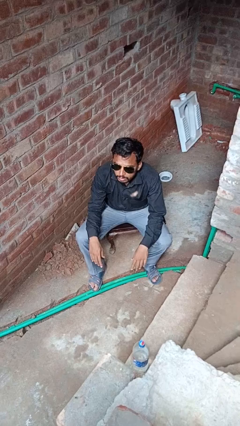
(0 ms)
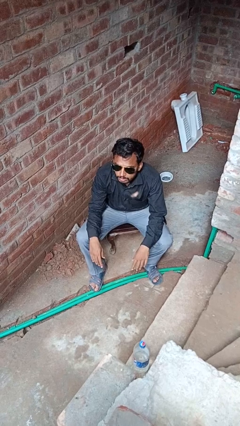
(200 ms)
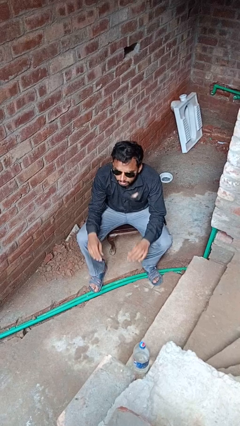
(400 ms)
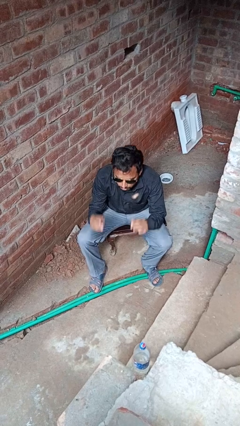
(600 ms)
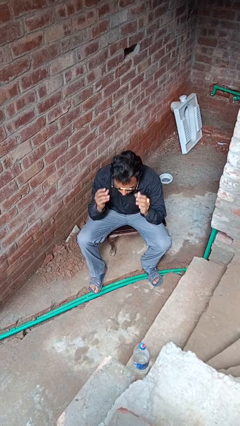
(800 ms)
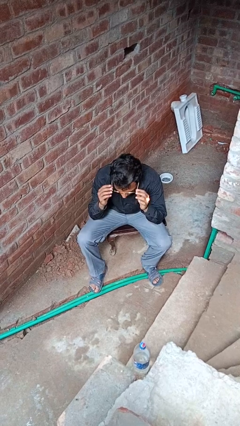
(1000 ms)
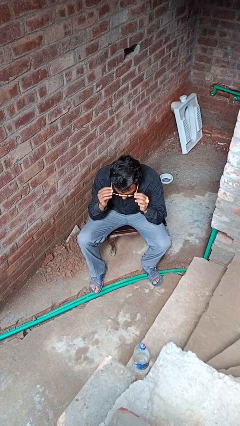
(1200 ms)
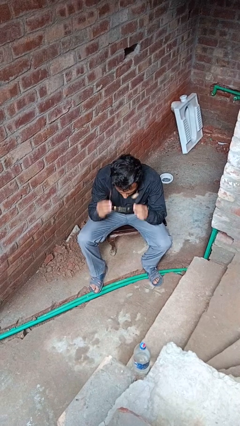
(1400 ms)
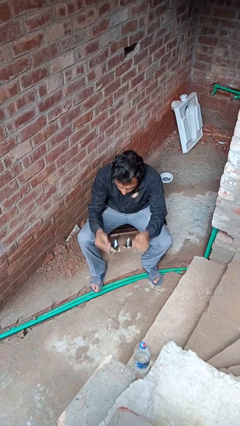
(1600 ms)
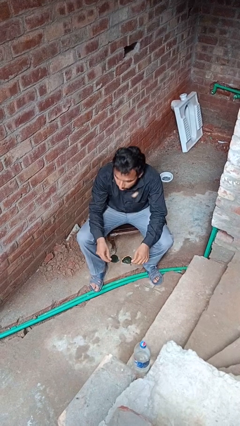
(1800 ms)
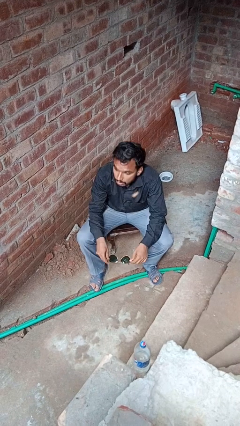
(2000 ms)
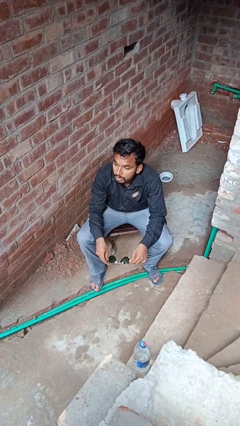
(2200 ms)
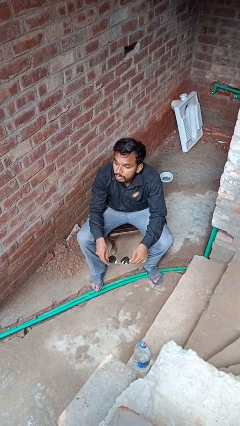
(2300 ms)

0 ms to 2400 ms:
person takes off glasses

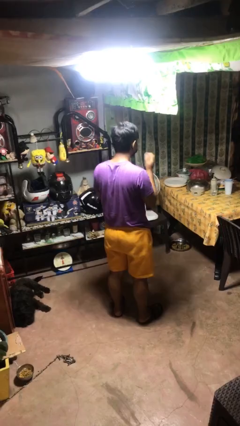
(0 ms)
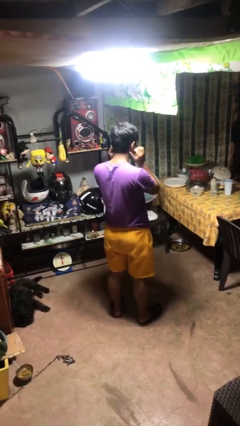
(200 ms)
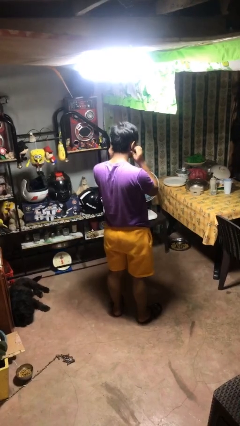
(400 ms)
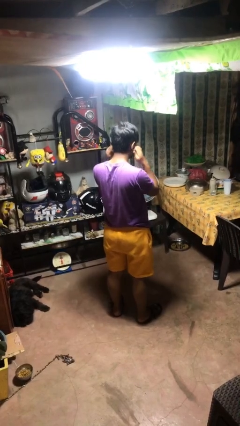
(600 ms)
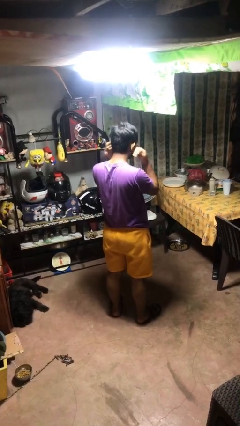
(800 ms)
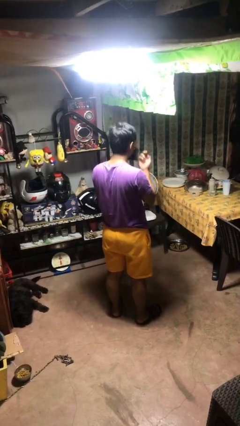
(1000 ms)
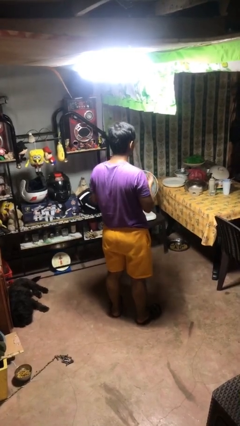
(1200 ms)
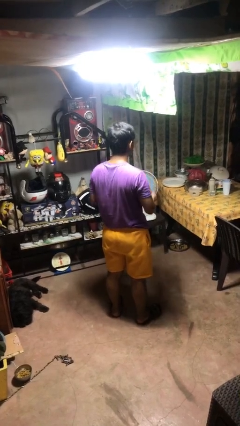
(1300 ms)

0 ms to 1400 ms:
person takes off facemask

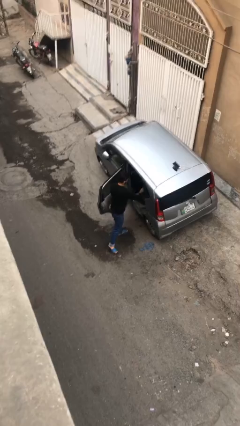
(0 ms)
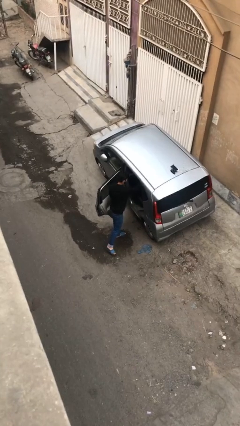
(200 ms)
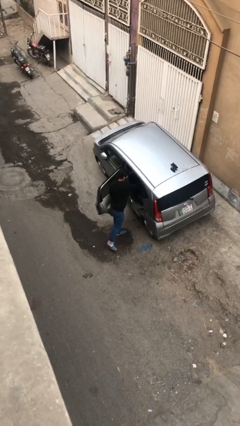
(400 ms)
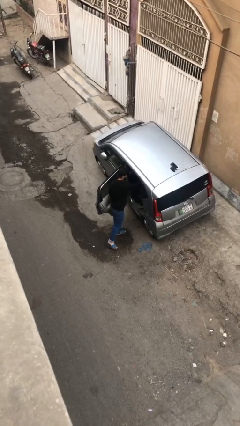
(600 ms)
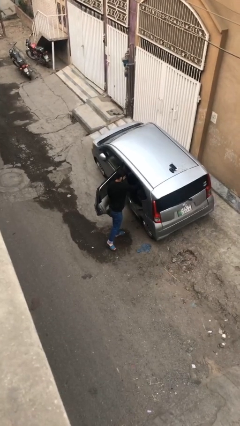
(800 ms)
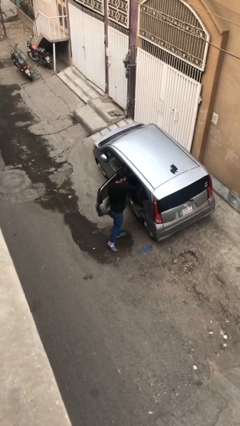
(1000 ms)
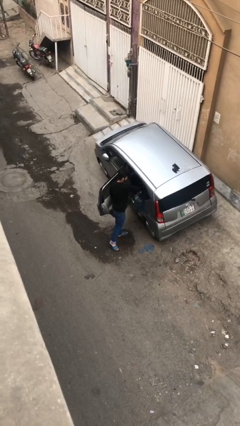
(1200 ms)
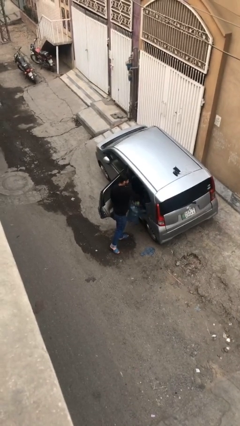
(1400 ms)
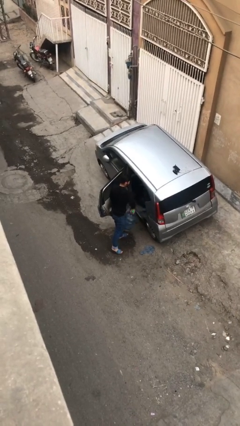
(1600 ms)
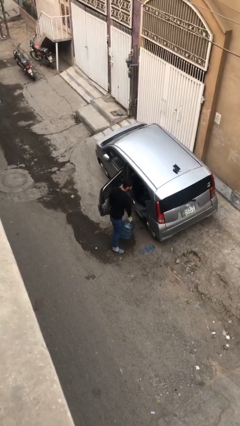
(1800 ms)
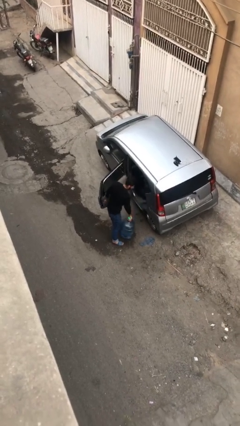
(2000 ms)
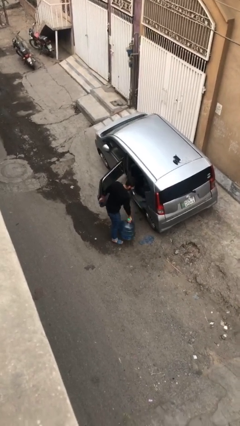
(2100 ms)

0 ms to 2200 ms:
person unloads car

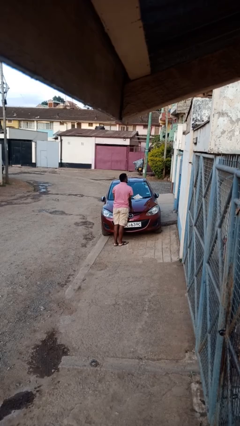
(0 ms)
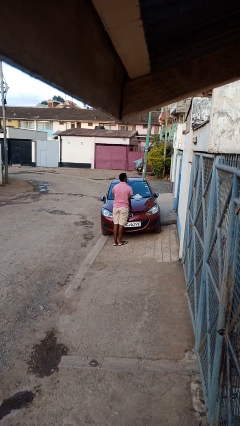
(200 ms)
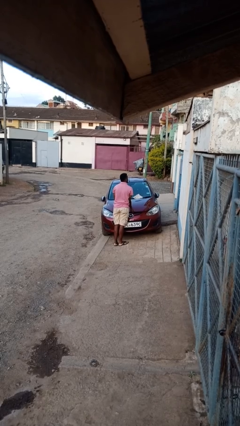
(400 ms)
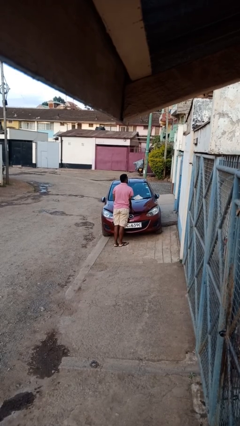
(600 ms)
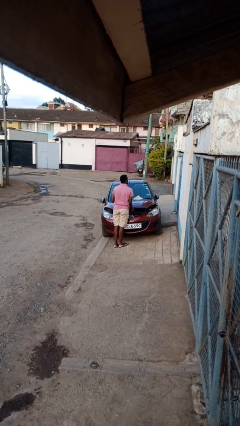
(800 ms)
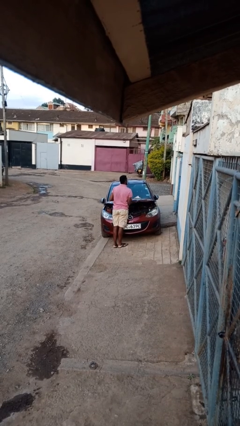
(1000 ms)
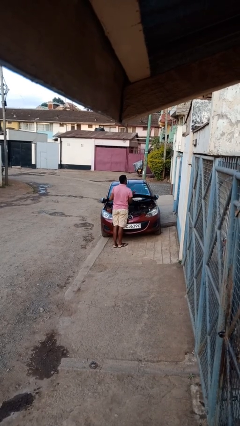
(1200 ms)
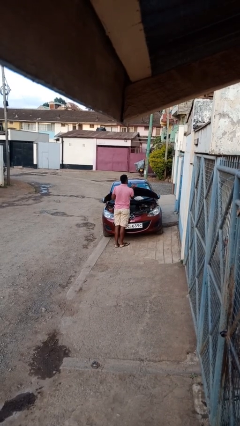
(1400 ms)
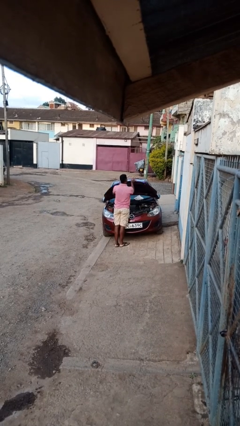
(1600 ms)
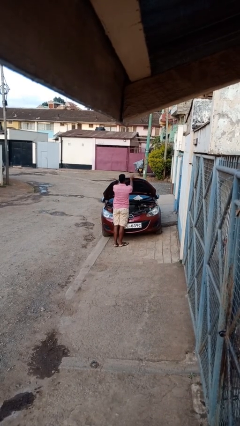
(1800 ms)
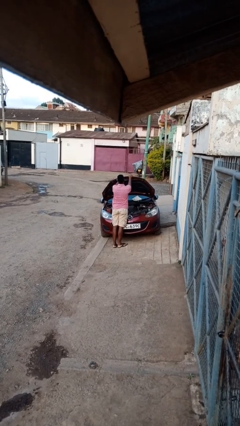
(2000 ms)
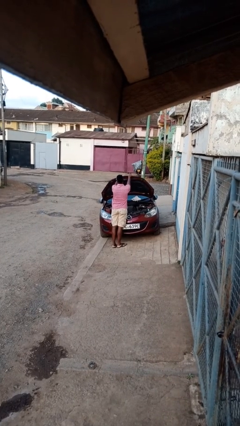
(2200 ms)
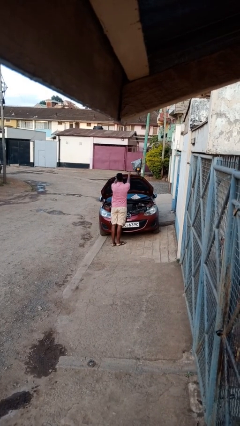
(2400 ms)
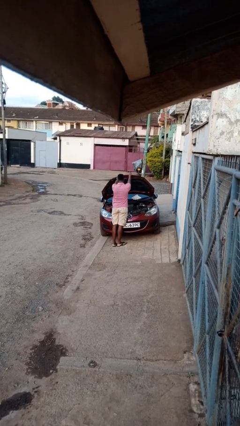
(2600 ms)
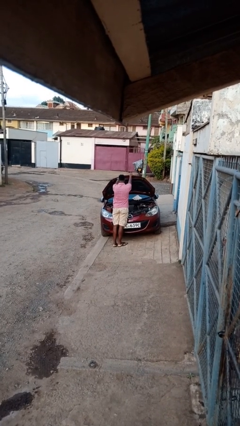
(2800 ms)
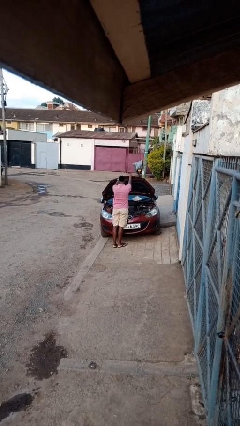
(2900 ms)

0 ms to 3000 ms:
person opens car hood

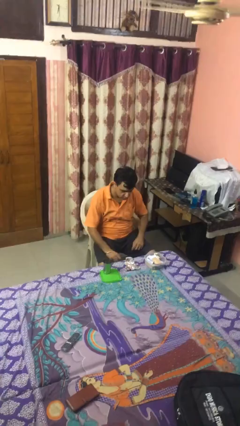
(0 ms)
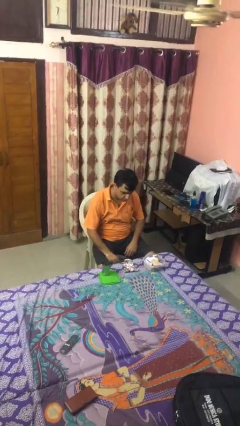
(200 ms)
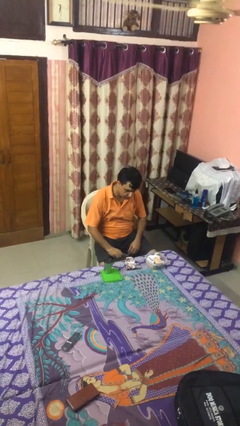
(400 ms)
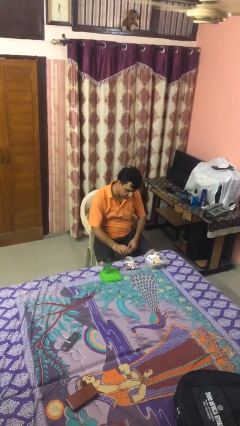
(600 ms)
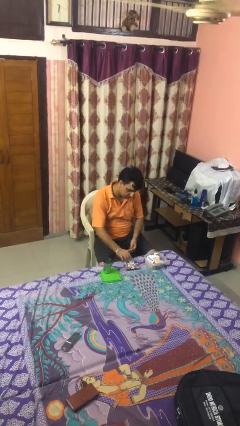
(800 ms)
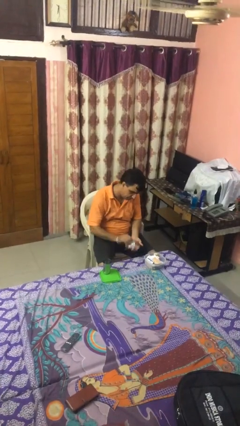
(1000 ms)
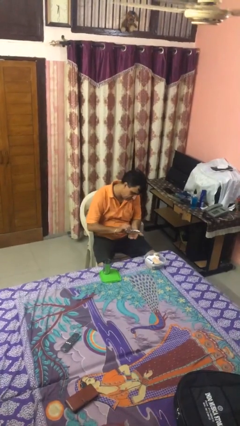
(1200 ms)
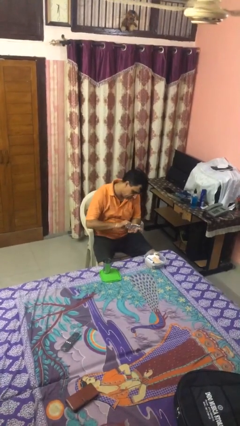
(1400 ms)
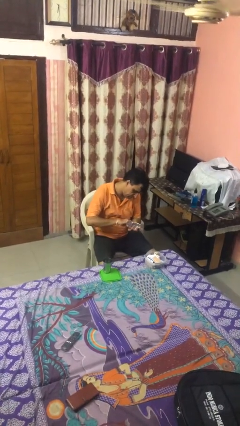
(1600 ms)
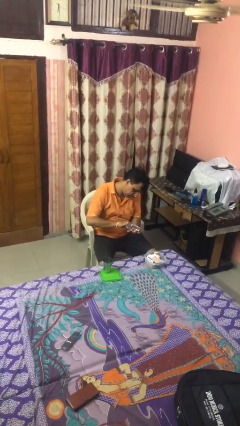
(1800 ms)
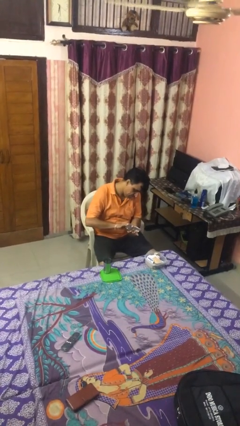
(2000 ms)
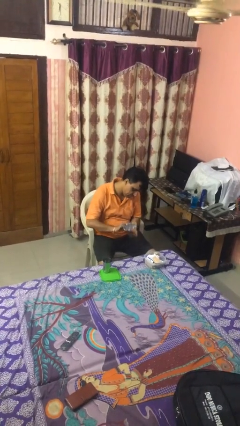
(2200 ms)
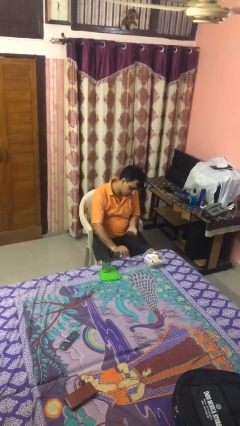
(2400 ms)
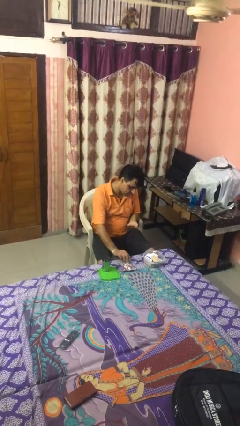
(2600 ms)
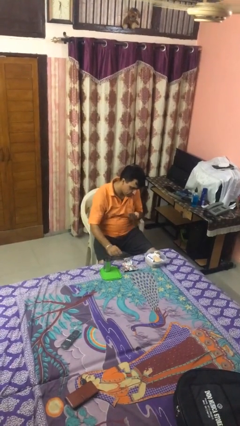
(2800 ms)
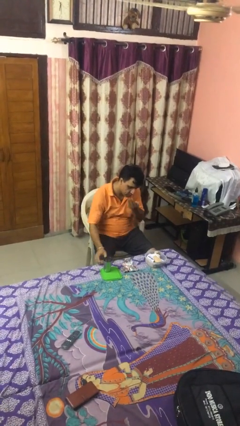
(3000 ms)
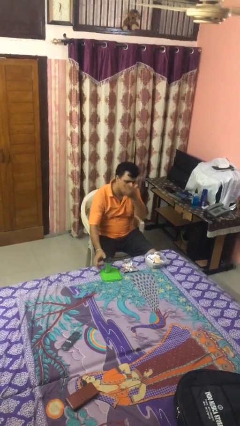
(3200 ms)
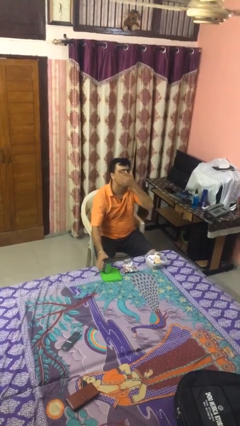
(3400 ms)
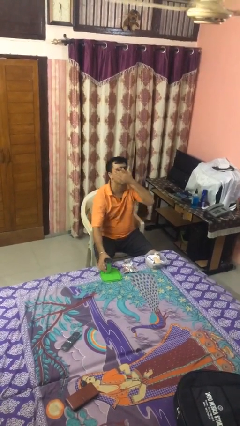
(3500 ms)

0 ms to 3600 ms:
person takes medicine pills

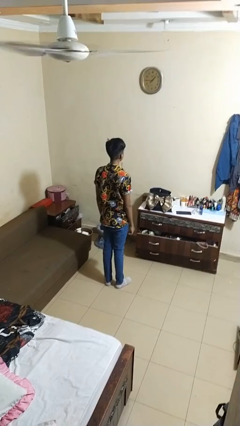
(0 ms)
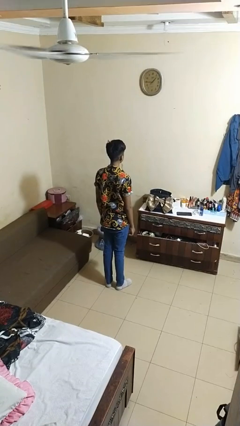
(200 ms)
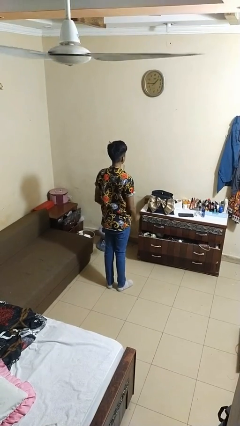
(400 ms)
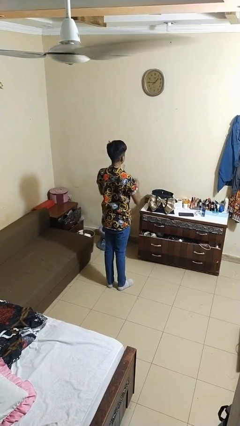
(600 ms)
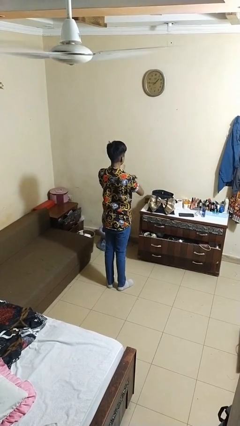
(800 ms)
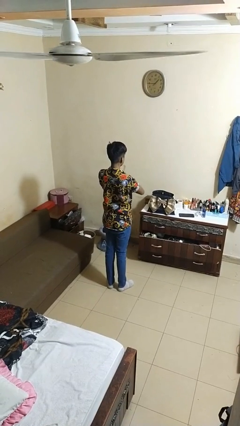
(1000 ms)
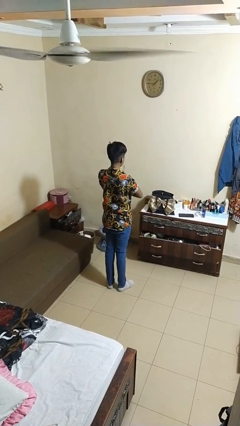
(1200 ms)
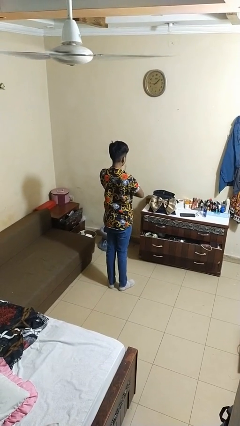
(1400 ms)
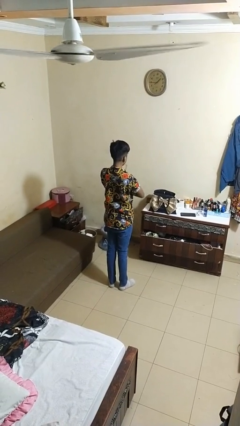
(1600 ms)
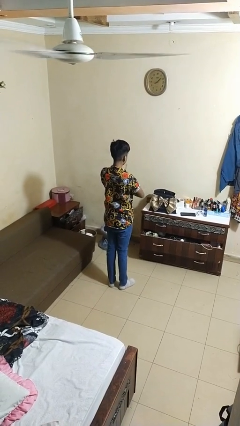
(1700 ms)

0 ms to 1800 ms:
person crosses arms

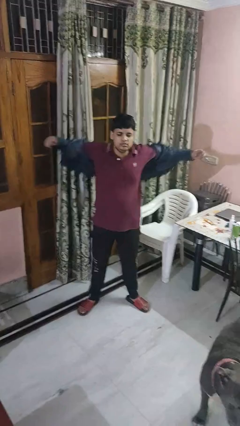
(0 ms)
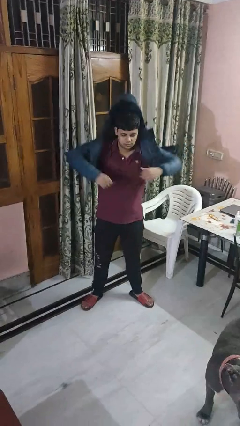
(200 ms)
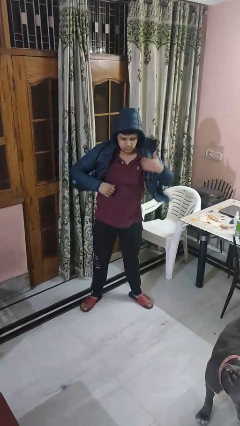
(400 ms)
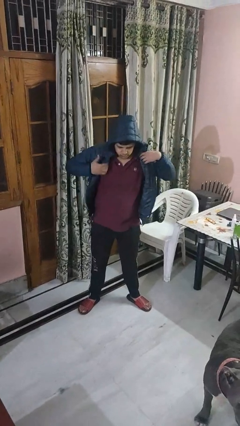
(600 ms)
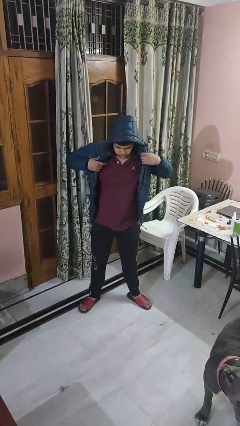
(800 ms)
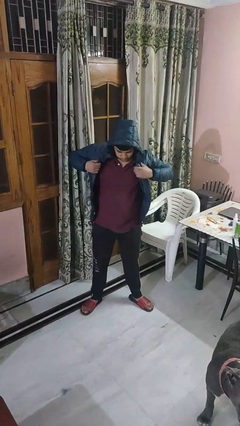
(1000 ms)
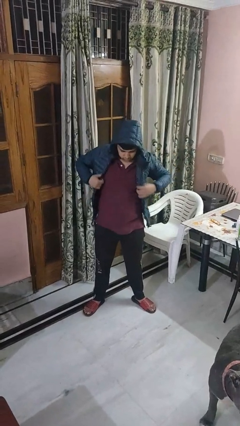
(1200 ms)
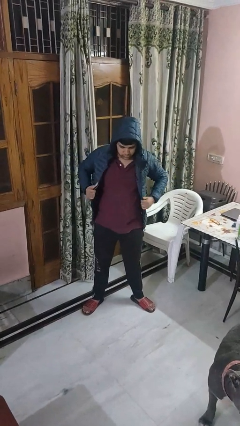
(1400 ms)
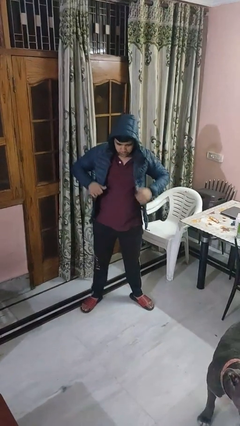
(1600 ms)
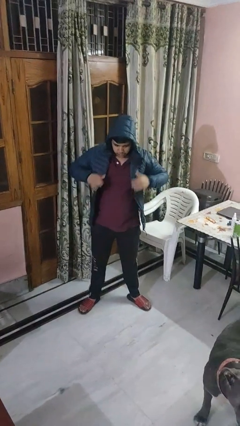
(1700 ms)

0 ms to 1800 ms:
person puts on hoodie

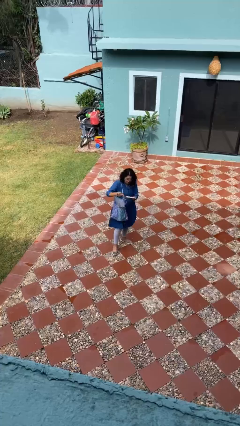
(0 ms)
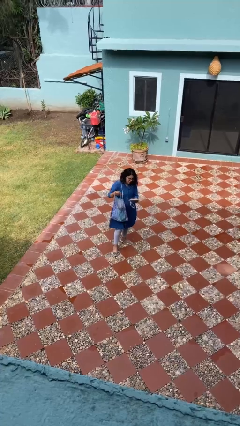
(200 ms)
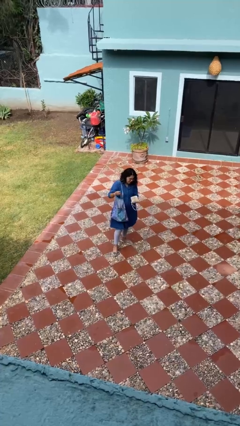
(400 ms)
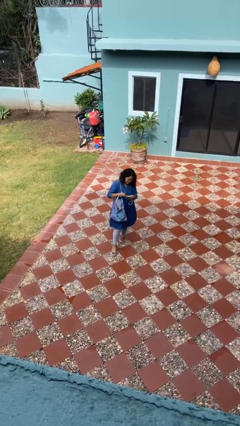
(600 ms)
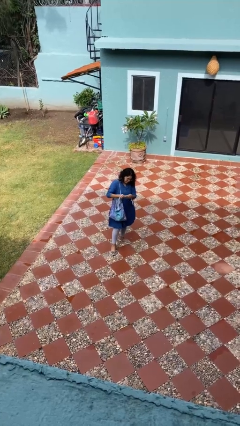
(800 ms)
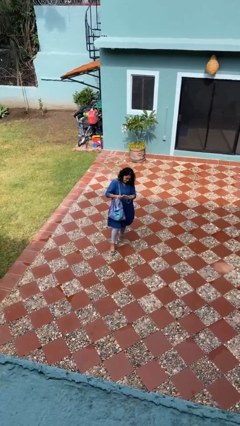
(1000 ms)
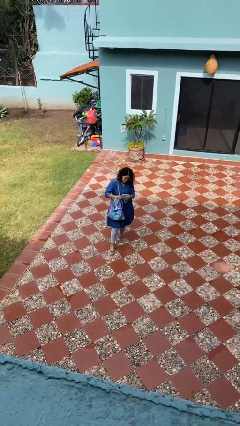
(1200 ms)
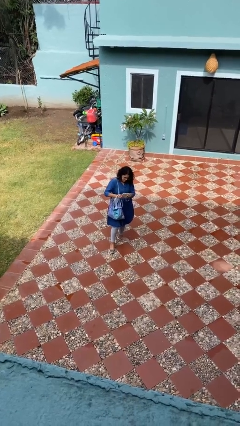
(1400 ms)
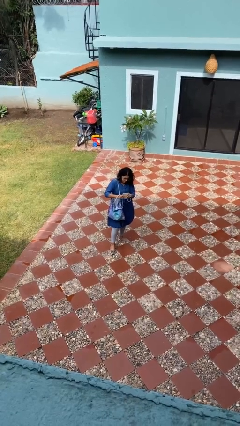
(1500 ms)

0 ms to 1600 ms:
person takes object from purse
